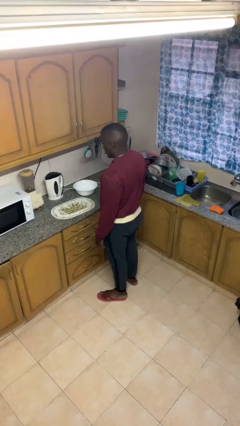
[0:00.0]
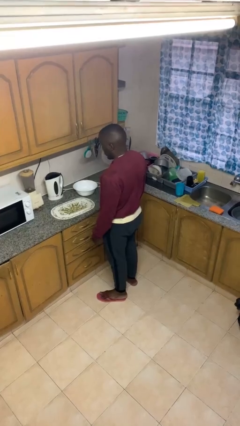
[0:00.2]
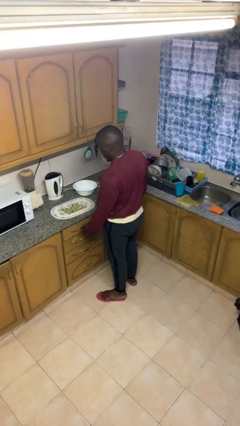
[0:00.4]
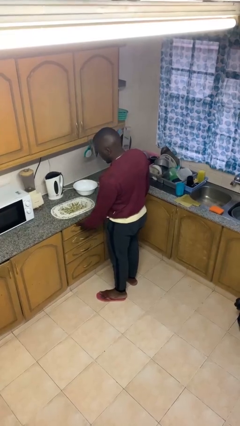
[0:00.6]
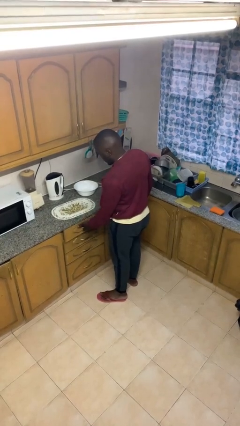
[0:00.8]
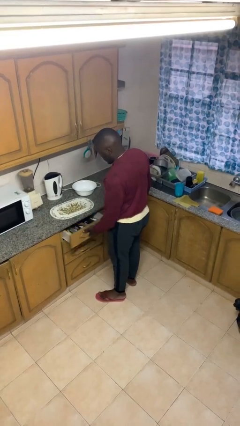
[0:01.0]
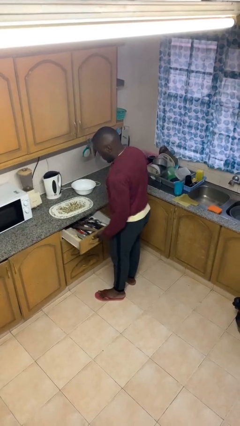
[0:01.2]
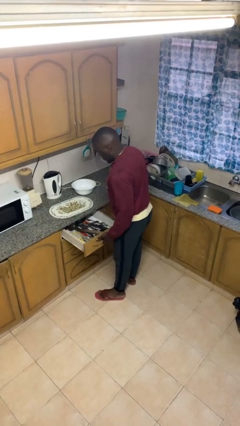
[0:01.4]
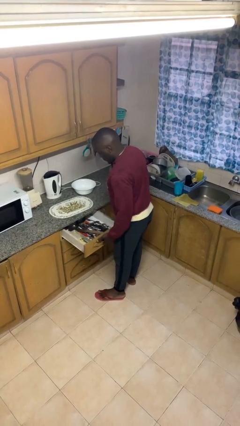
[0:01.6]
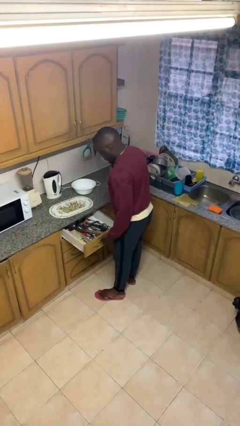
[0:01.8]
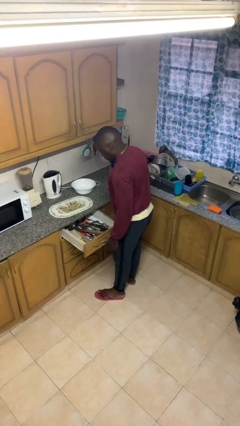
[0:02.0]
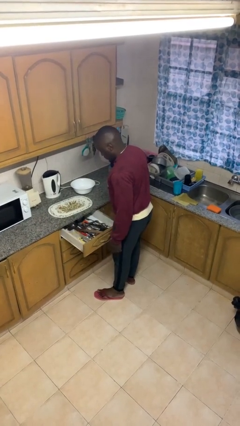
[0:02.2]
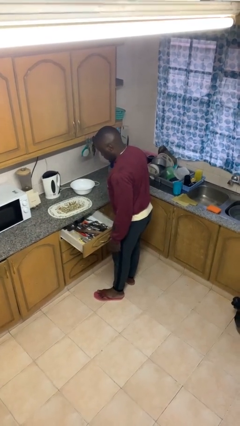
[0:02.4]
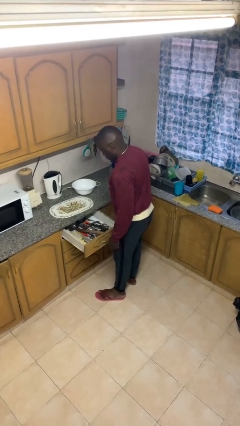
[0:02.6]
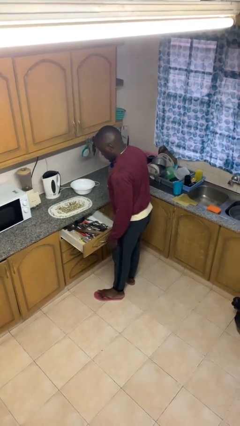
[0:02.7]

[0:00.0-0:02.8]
person opens kitchen drawer

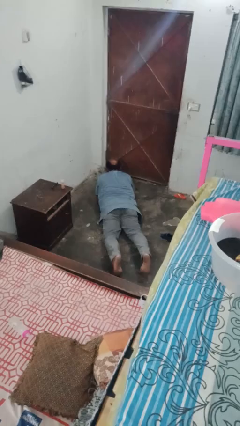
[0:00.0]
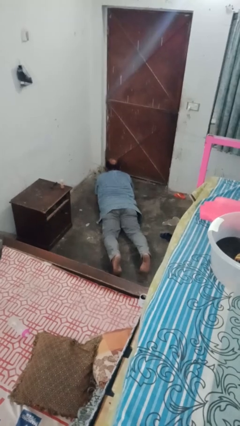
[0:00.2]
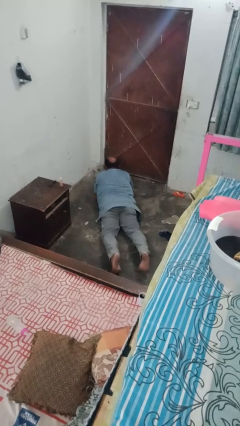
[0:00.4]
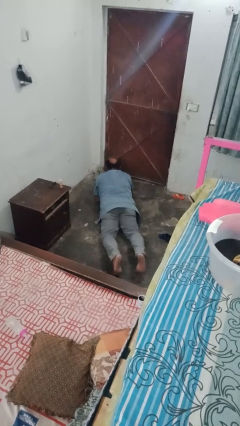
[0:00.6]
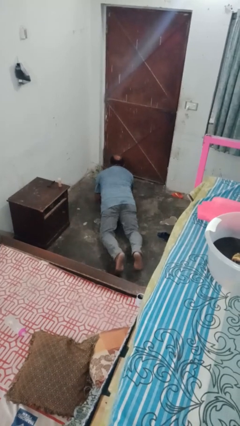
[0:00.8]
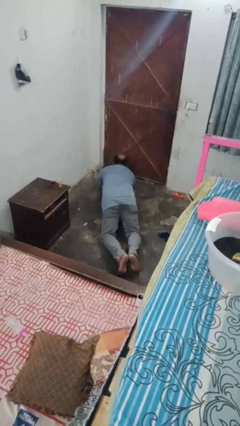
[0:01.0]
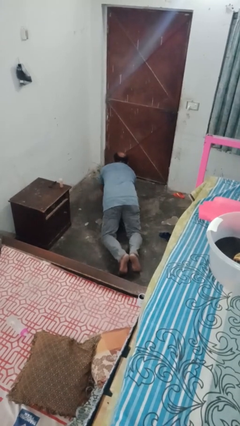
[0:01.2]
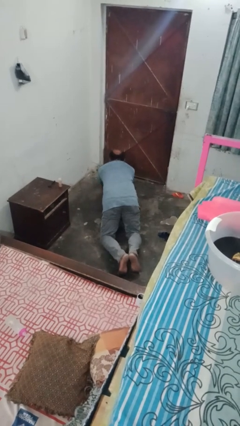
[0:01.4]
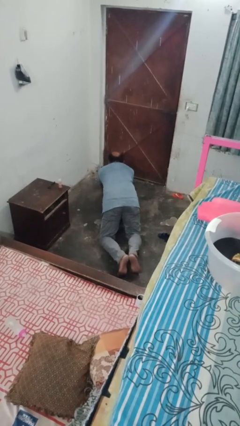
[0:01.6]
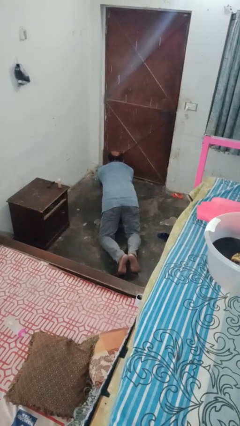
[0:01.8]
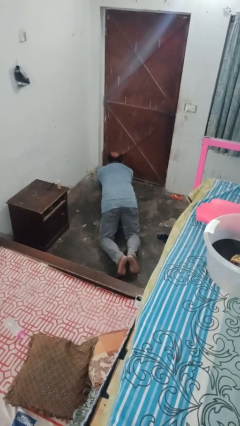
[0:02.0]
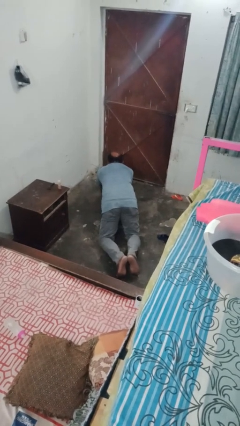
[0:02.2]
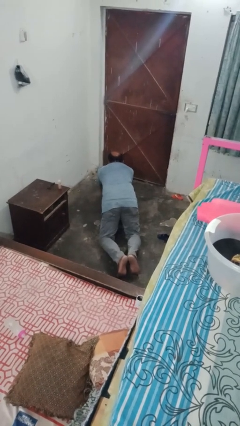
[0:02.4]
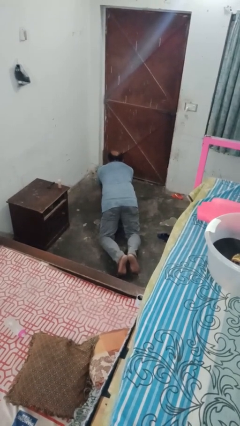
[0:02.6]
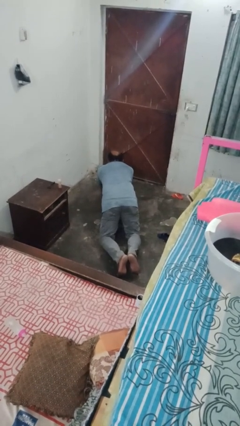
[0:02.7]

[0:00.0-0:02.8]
person exercises with plank

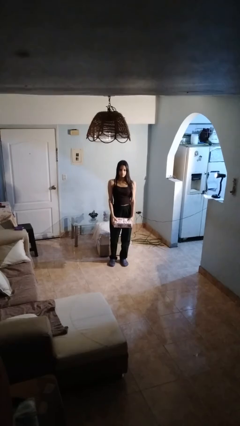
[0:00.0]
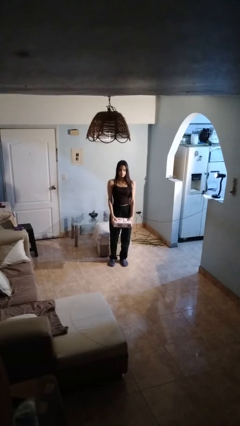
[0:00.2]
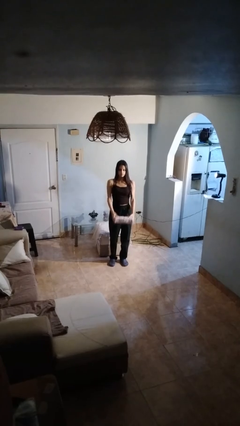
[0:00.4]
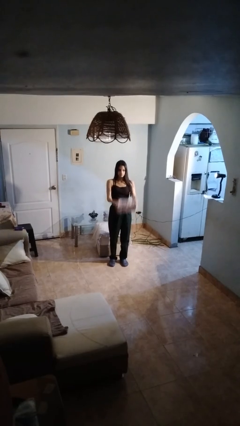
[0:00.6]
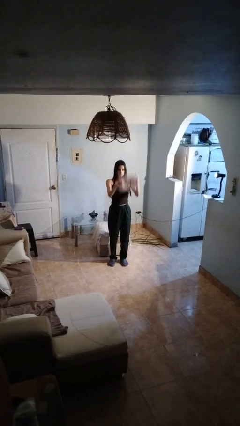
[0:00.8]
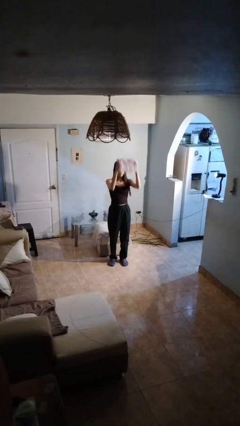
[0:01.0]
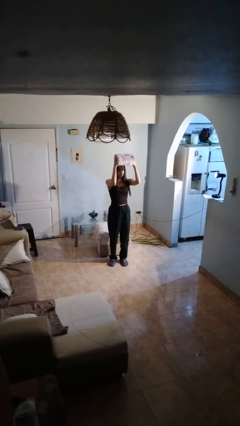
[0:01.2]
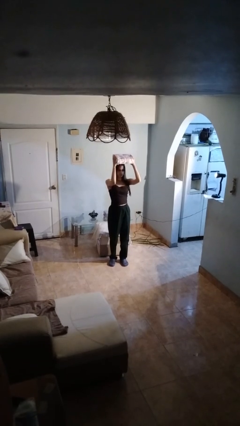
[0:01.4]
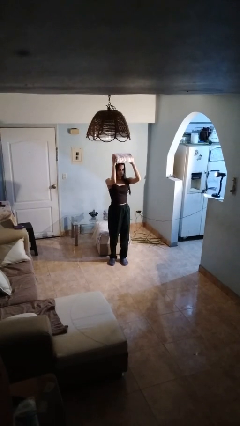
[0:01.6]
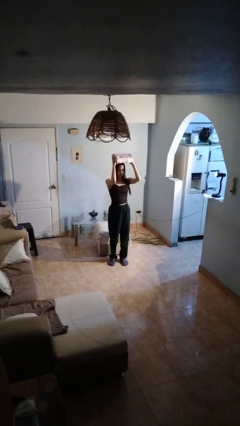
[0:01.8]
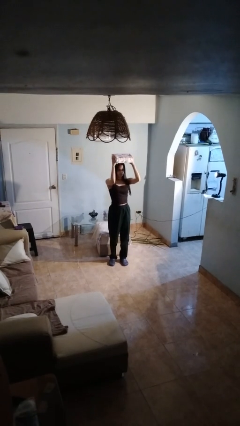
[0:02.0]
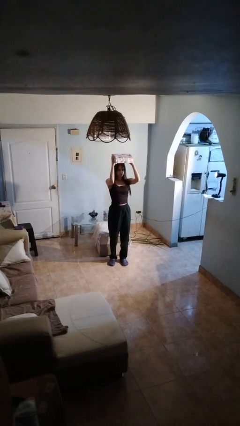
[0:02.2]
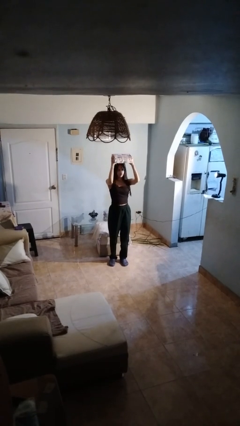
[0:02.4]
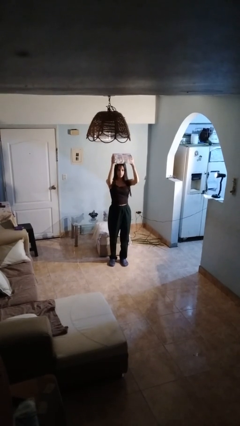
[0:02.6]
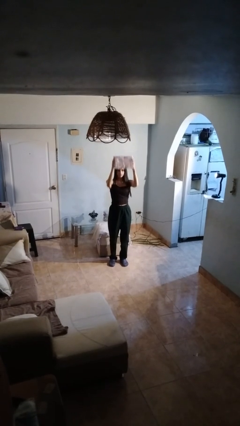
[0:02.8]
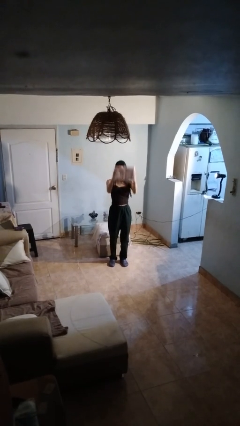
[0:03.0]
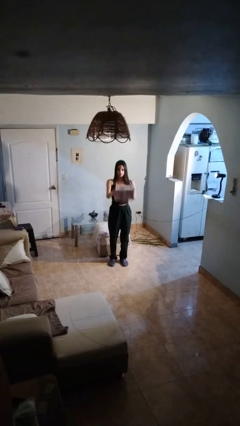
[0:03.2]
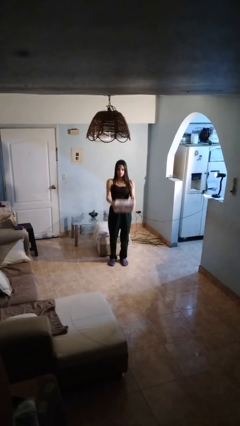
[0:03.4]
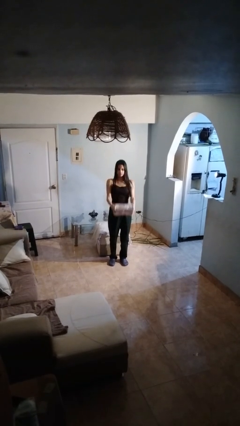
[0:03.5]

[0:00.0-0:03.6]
person holds object above head

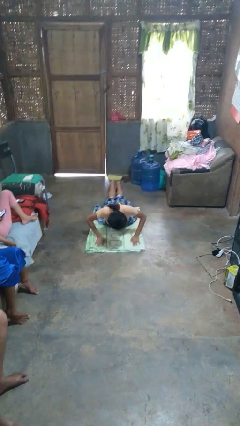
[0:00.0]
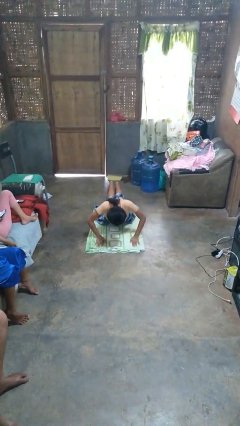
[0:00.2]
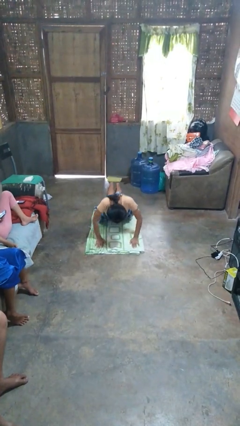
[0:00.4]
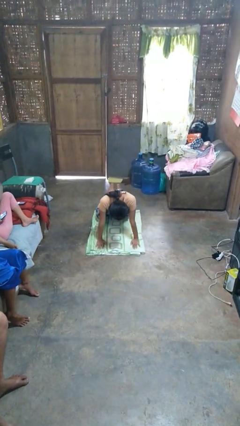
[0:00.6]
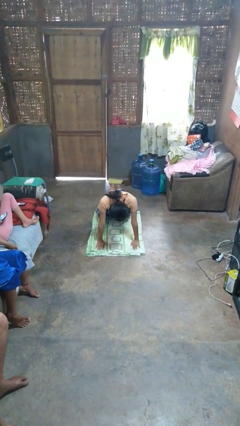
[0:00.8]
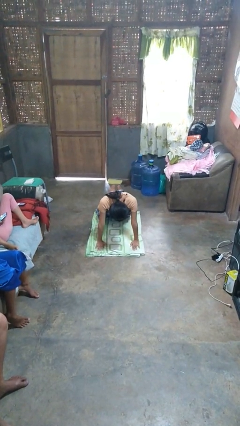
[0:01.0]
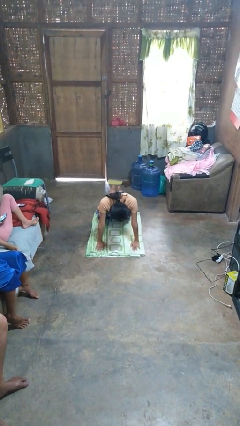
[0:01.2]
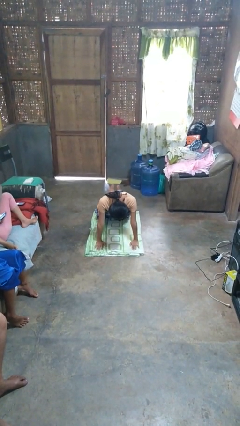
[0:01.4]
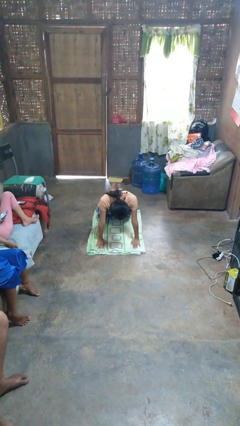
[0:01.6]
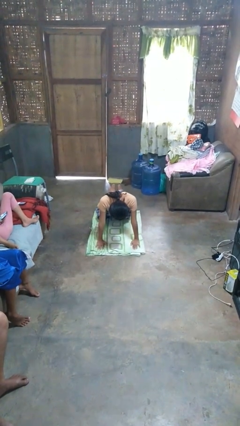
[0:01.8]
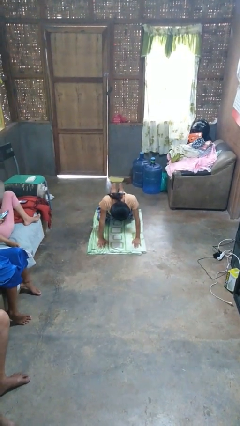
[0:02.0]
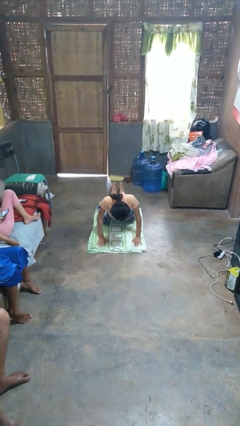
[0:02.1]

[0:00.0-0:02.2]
person exercises with pushup

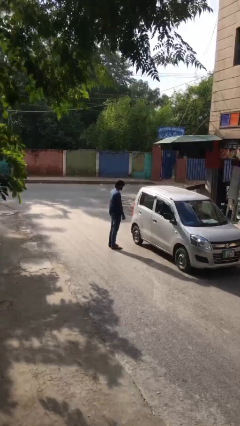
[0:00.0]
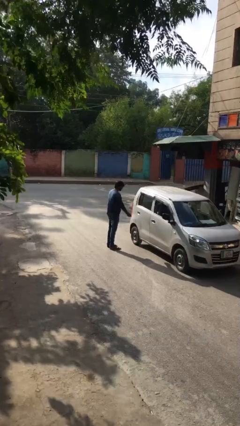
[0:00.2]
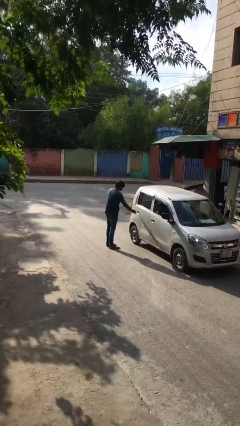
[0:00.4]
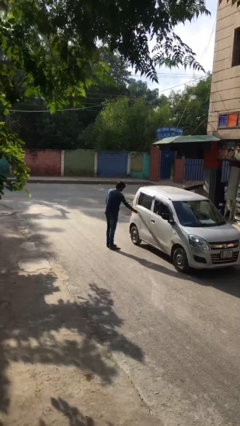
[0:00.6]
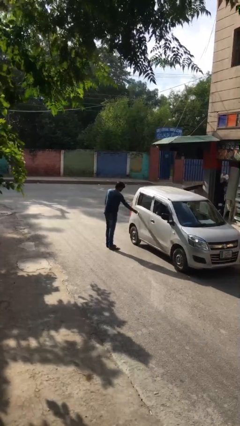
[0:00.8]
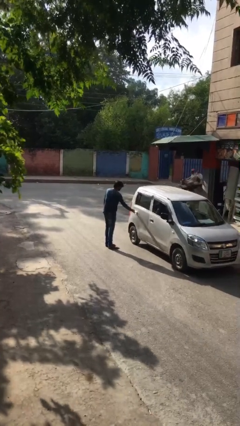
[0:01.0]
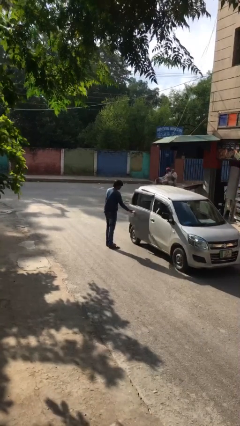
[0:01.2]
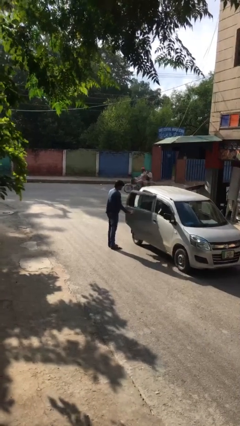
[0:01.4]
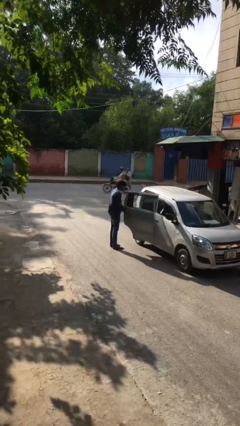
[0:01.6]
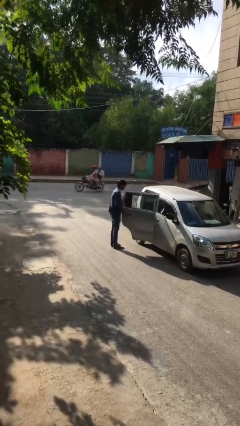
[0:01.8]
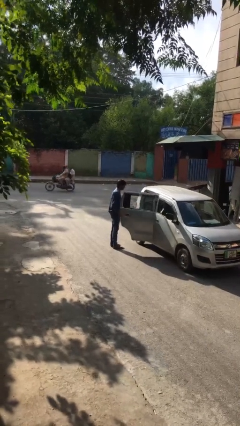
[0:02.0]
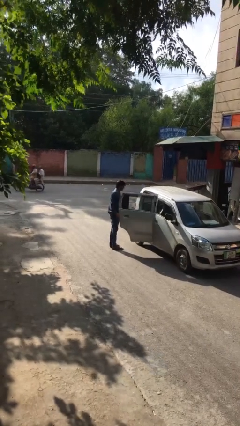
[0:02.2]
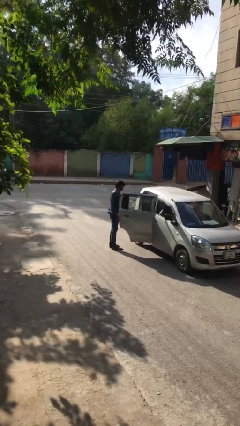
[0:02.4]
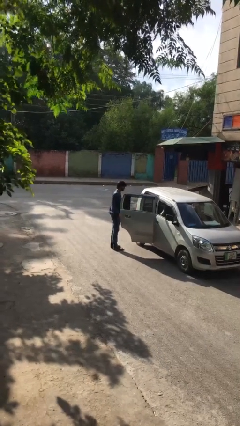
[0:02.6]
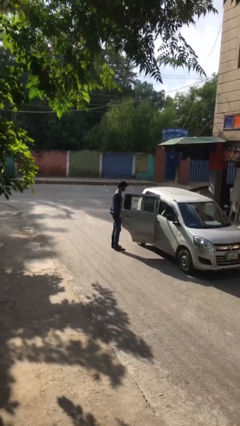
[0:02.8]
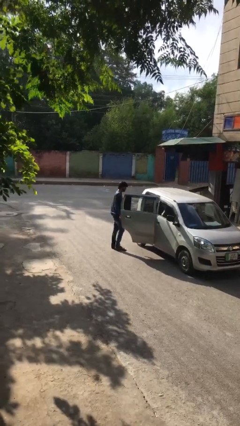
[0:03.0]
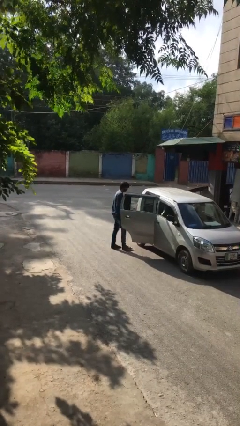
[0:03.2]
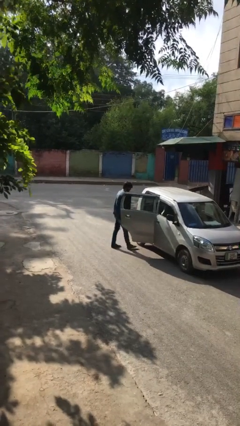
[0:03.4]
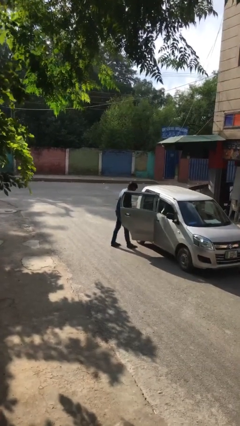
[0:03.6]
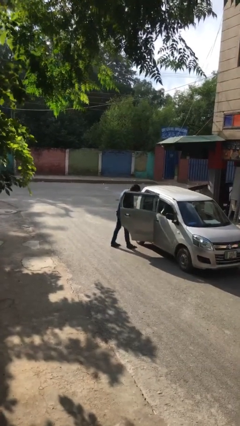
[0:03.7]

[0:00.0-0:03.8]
person opens car door

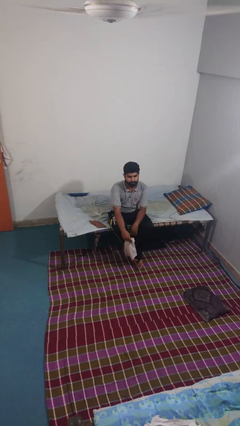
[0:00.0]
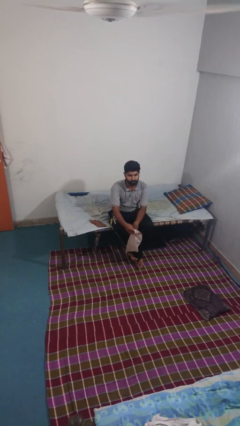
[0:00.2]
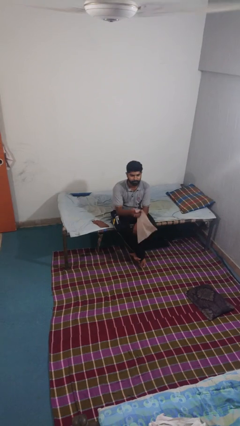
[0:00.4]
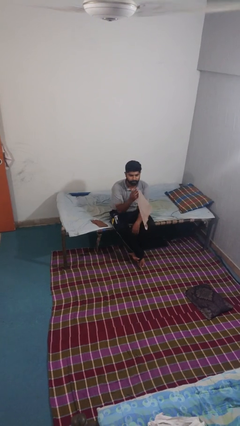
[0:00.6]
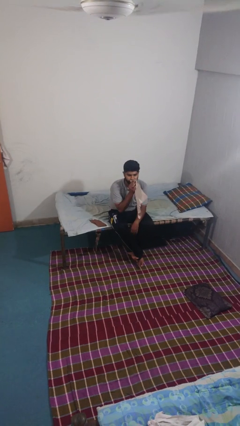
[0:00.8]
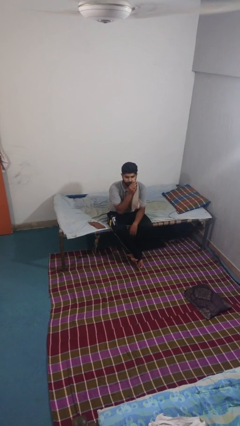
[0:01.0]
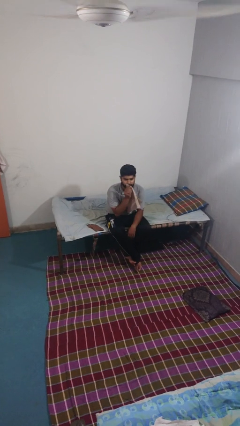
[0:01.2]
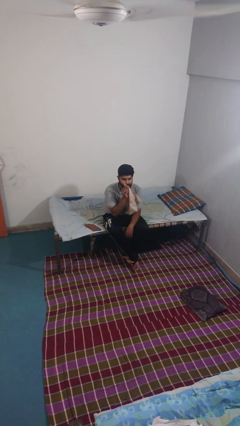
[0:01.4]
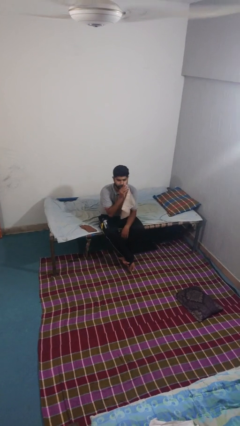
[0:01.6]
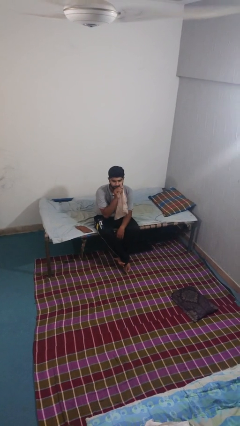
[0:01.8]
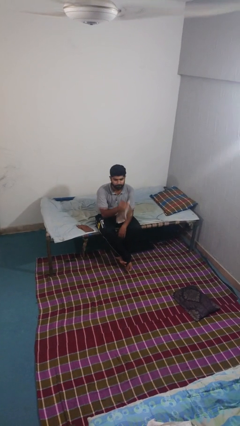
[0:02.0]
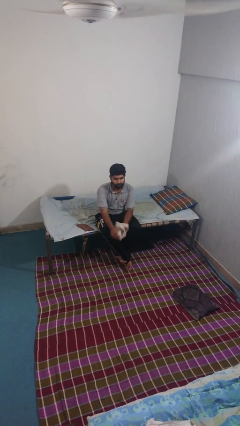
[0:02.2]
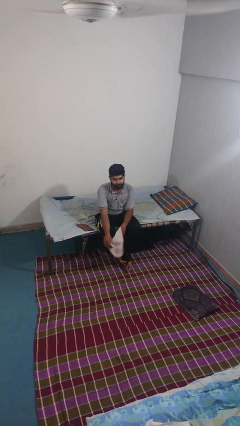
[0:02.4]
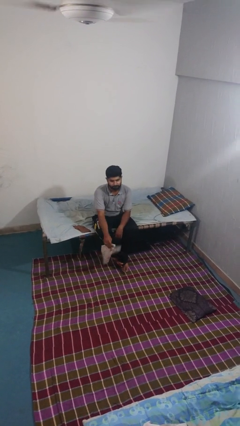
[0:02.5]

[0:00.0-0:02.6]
person wipes mouth with napkin
